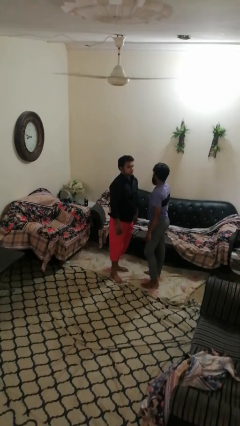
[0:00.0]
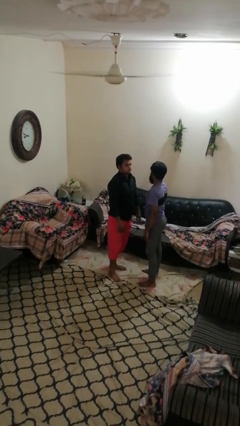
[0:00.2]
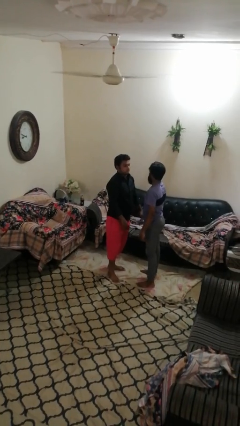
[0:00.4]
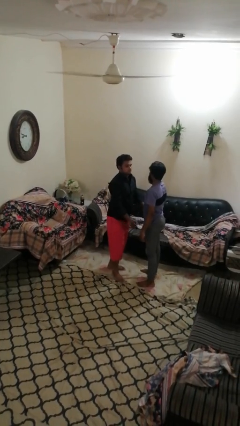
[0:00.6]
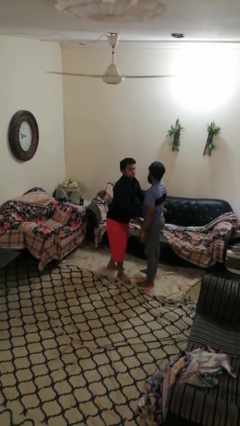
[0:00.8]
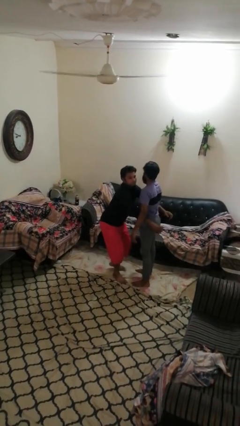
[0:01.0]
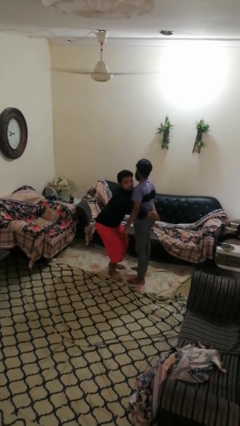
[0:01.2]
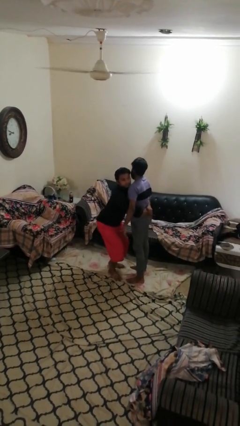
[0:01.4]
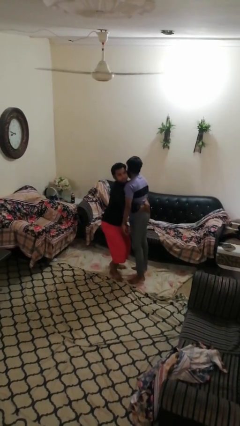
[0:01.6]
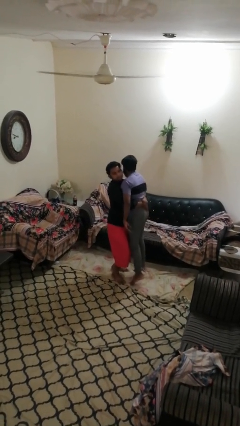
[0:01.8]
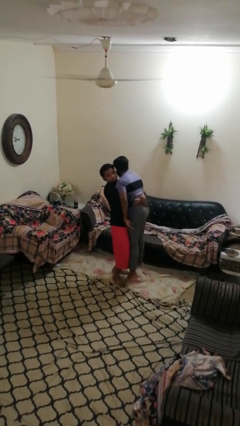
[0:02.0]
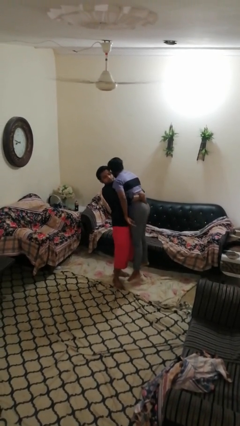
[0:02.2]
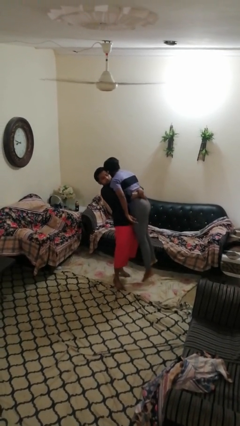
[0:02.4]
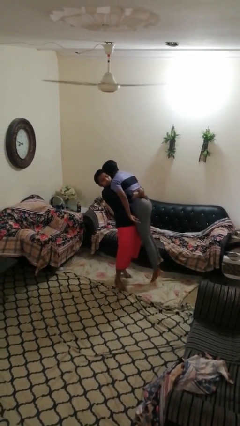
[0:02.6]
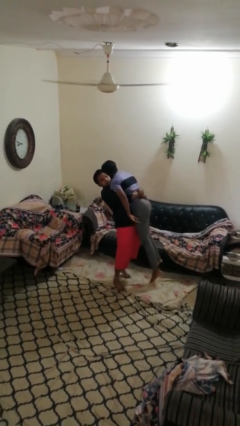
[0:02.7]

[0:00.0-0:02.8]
person picks up person

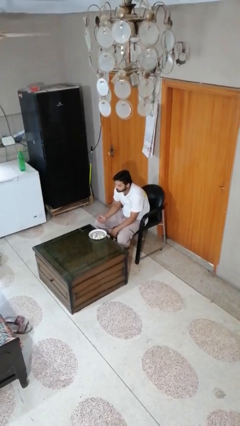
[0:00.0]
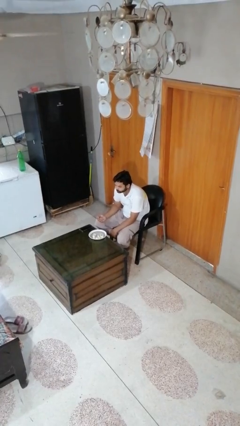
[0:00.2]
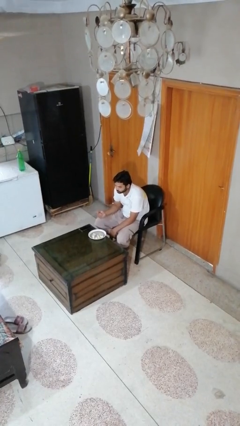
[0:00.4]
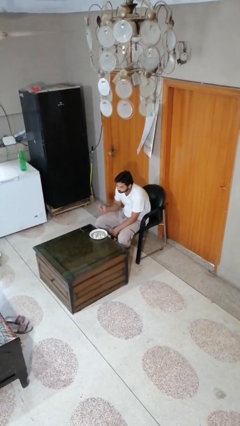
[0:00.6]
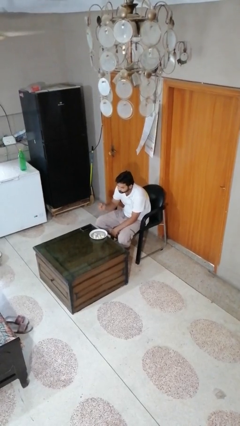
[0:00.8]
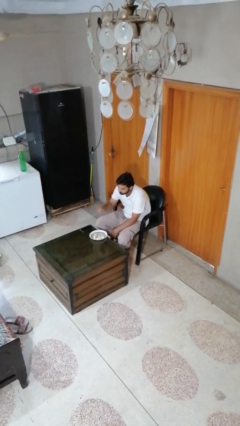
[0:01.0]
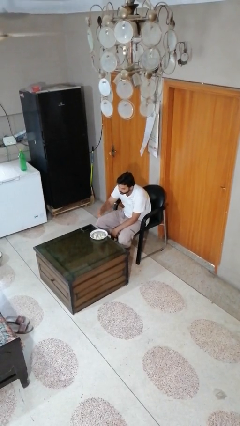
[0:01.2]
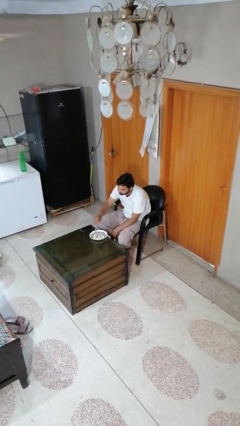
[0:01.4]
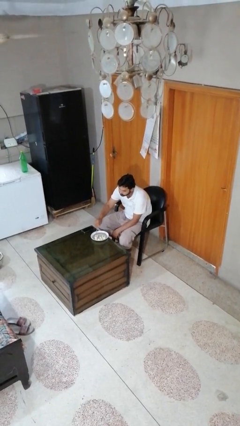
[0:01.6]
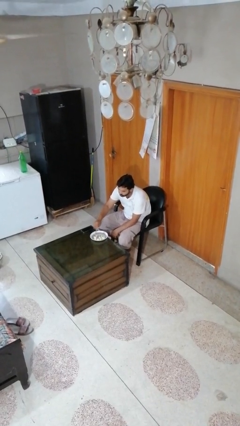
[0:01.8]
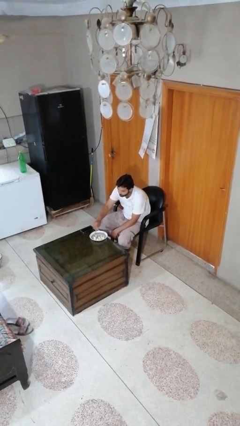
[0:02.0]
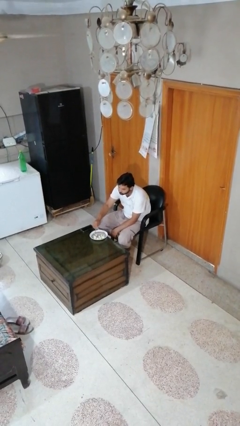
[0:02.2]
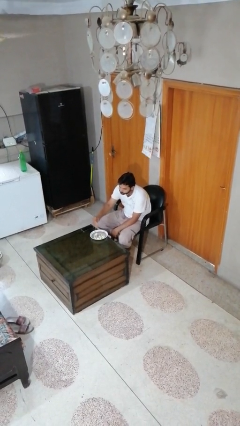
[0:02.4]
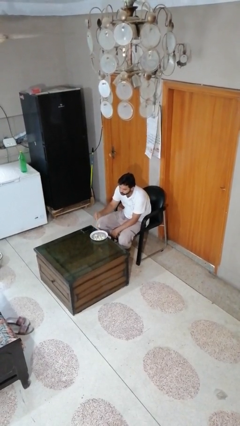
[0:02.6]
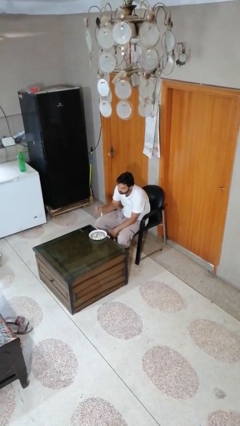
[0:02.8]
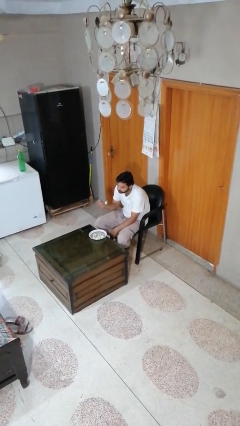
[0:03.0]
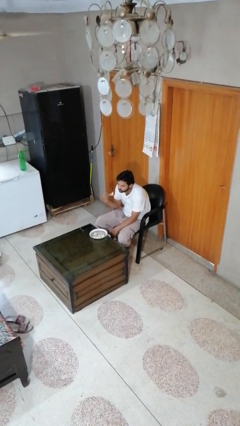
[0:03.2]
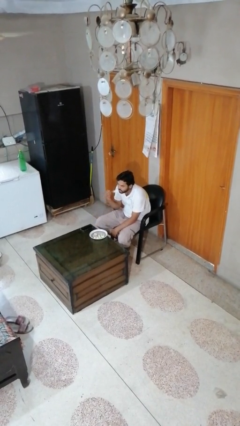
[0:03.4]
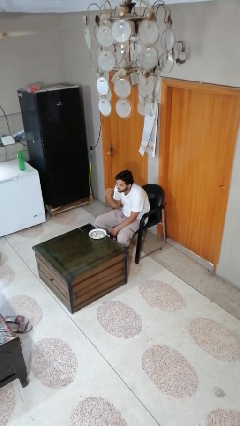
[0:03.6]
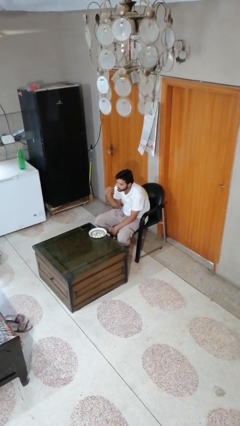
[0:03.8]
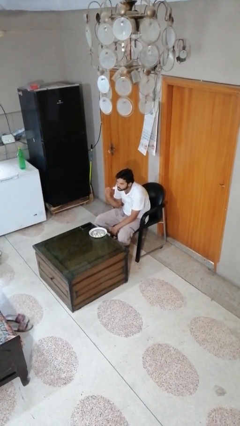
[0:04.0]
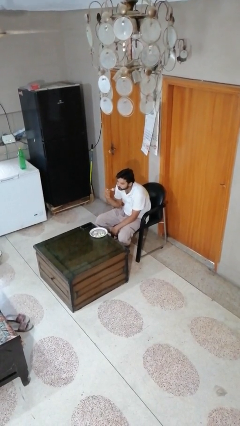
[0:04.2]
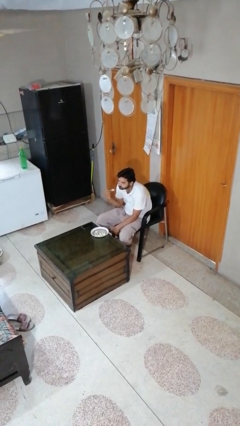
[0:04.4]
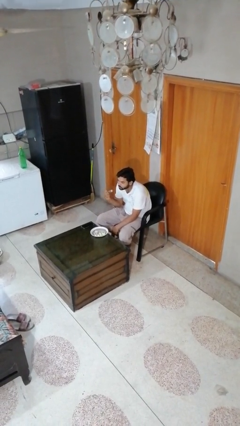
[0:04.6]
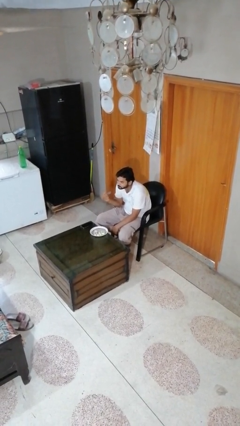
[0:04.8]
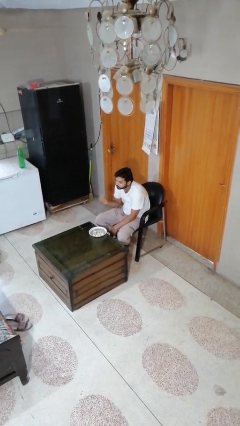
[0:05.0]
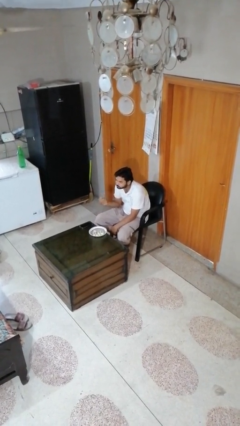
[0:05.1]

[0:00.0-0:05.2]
person eats with utensil

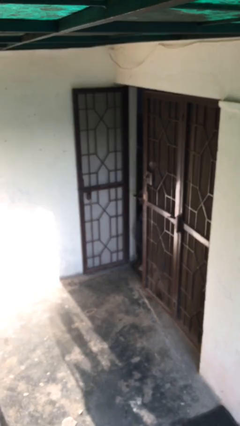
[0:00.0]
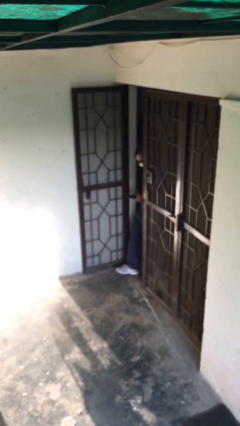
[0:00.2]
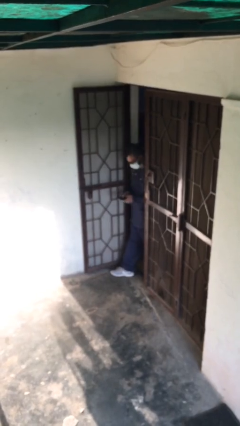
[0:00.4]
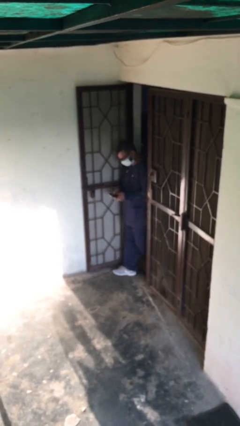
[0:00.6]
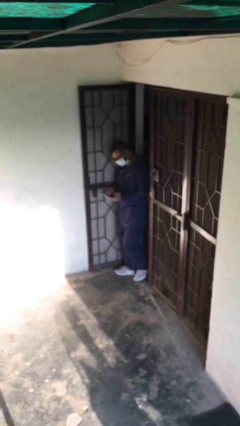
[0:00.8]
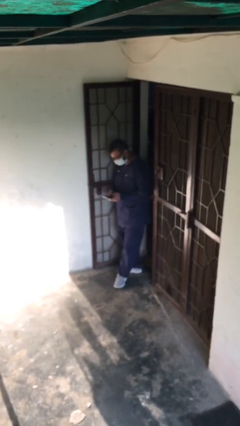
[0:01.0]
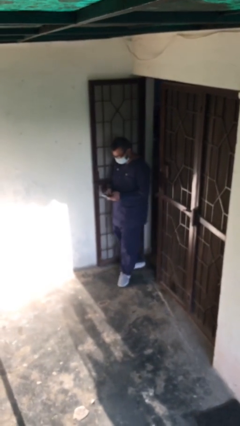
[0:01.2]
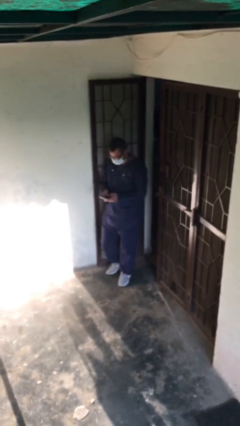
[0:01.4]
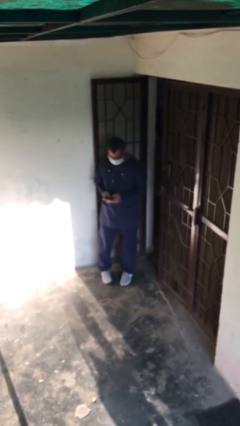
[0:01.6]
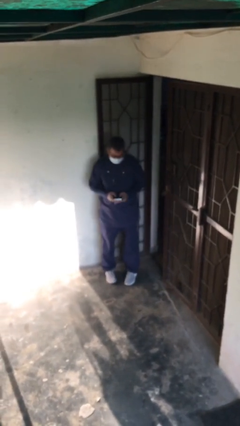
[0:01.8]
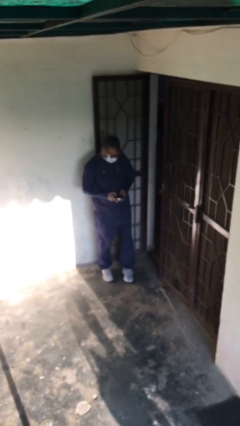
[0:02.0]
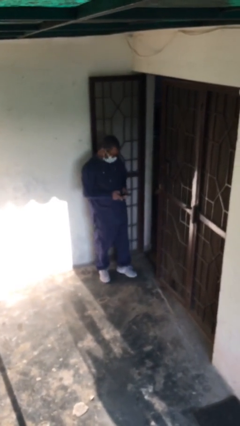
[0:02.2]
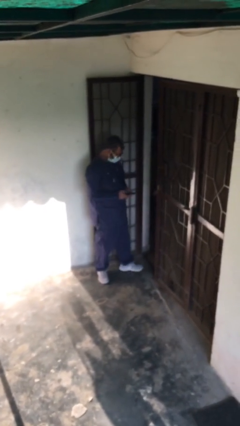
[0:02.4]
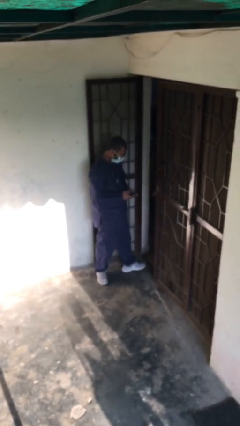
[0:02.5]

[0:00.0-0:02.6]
person enters scene through structure

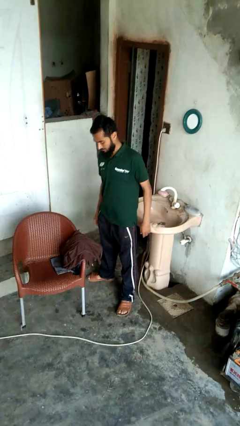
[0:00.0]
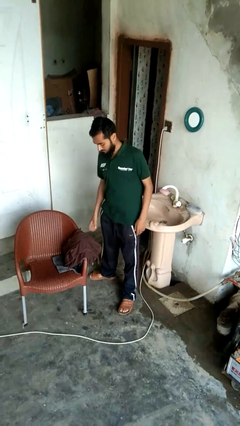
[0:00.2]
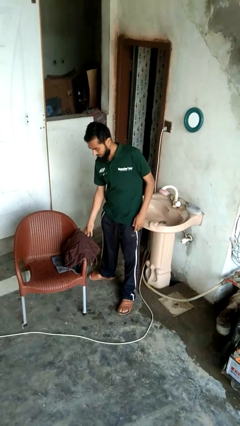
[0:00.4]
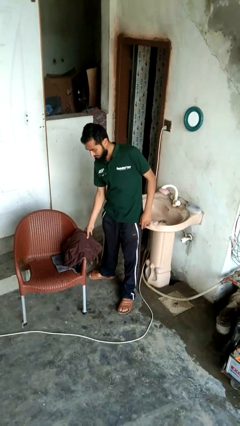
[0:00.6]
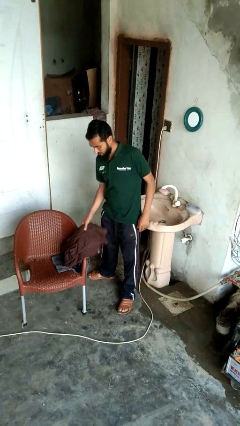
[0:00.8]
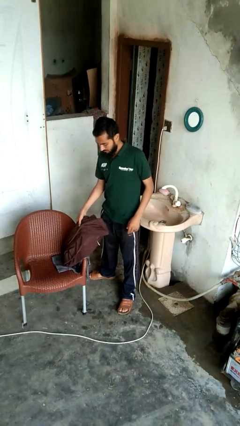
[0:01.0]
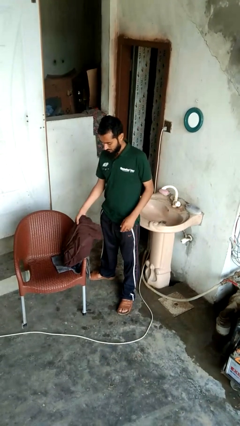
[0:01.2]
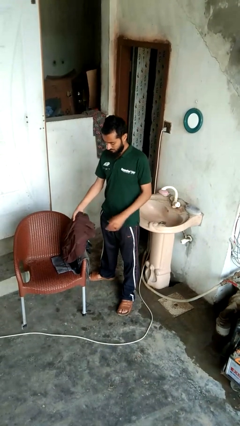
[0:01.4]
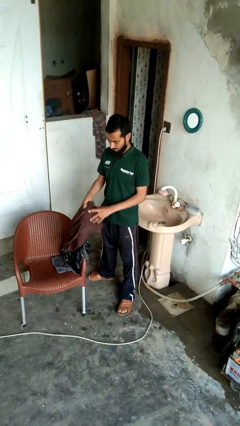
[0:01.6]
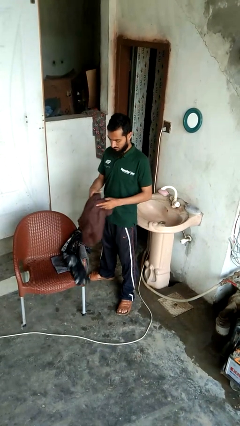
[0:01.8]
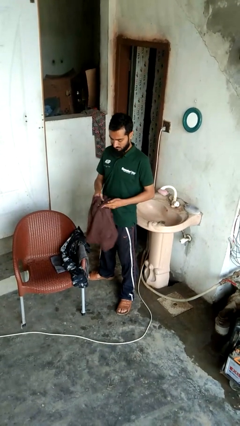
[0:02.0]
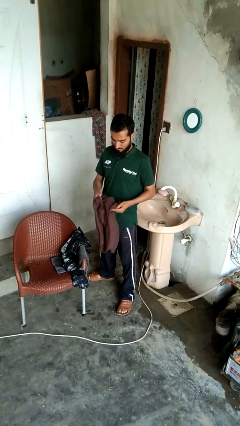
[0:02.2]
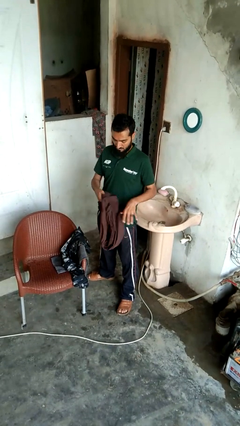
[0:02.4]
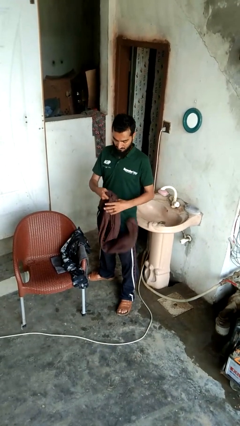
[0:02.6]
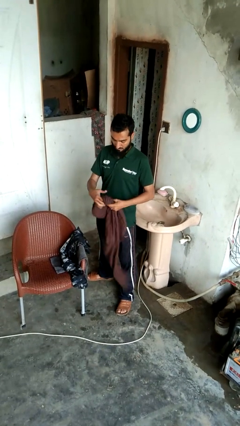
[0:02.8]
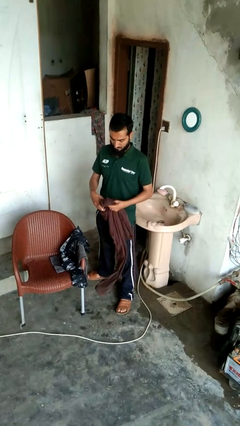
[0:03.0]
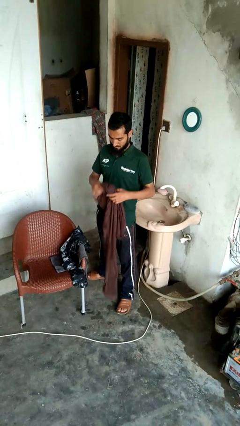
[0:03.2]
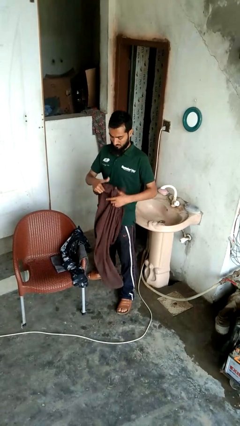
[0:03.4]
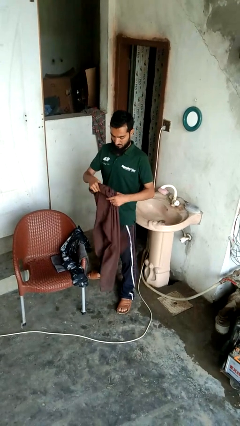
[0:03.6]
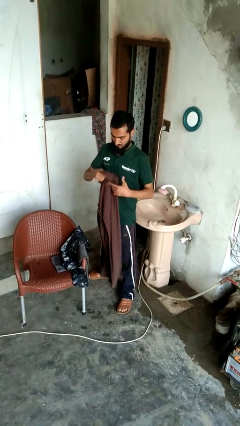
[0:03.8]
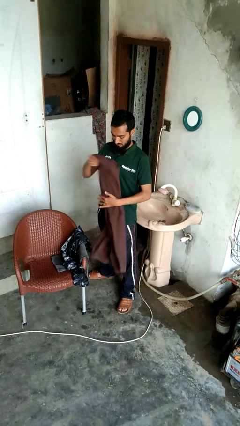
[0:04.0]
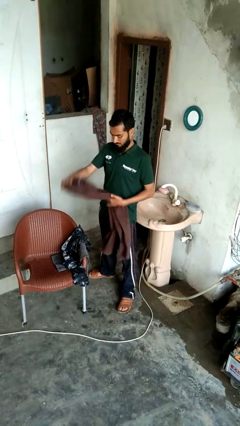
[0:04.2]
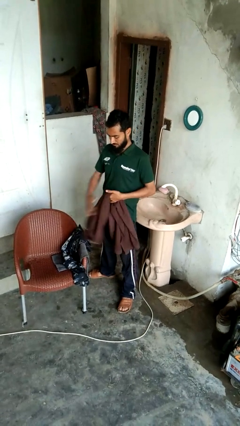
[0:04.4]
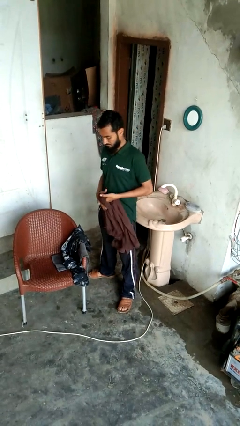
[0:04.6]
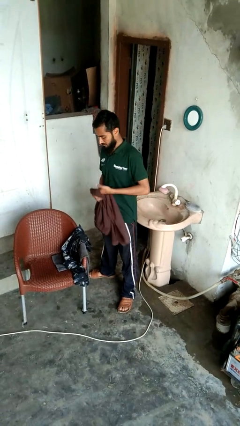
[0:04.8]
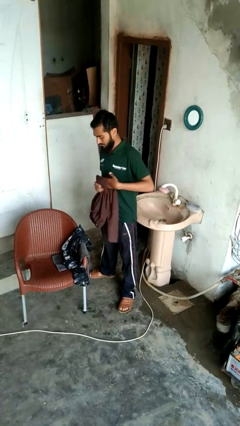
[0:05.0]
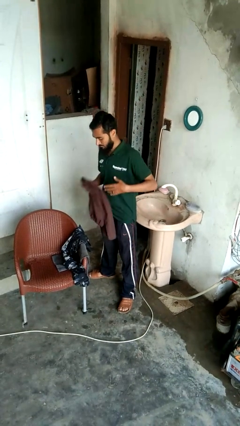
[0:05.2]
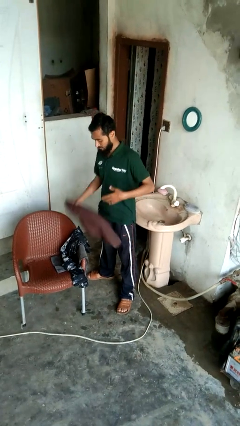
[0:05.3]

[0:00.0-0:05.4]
person folds pants

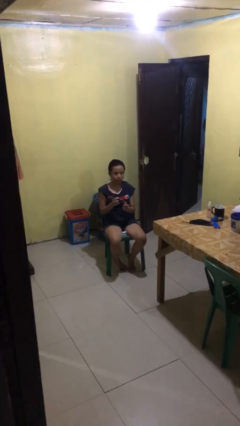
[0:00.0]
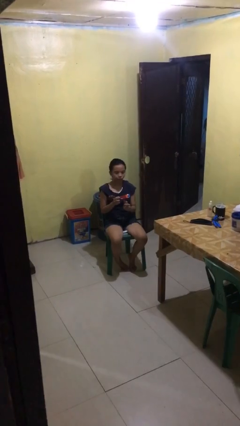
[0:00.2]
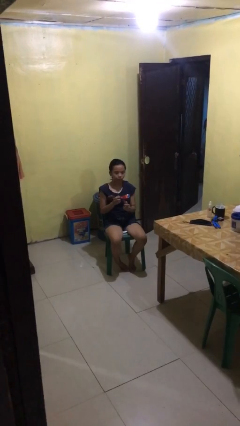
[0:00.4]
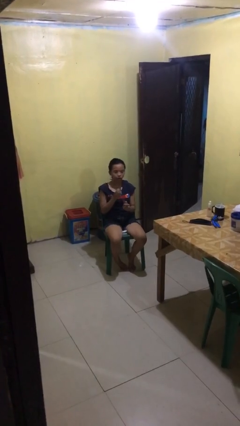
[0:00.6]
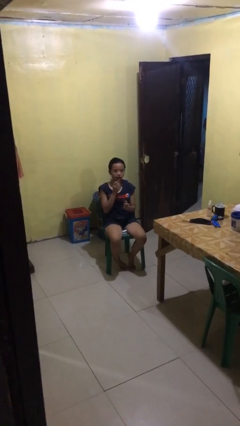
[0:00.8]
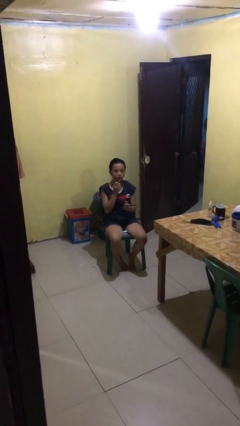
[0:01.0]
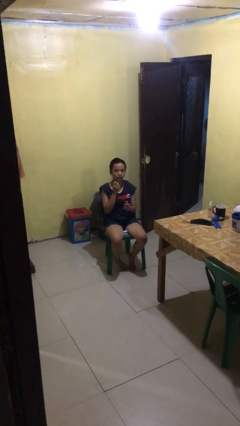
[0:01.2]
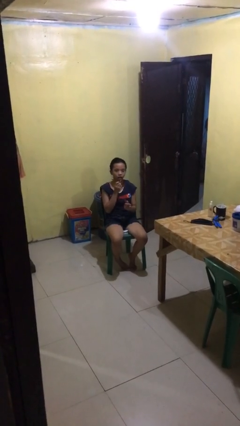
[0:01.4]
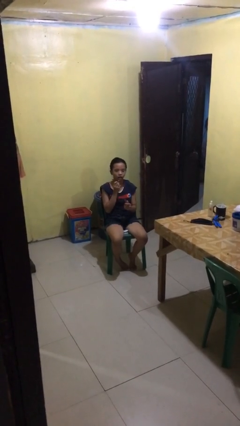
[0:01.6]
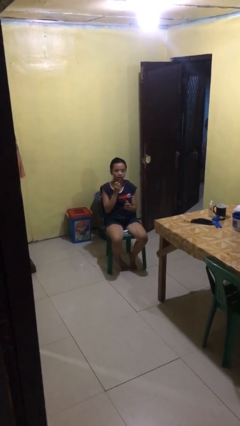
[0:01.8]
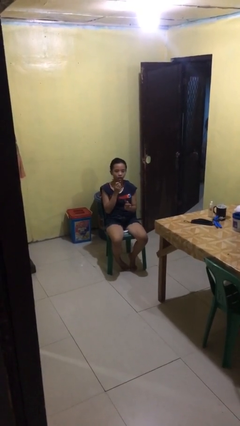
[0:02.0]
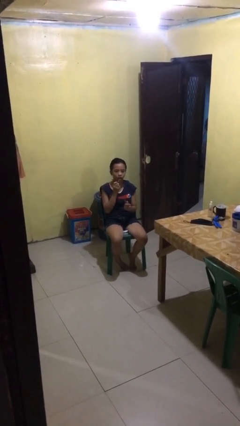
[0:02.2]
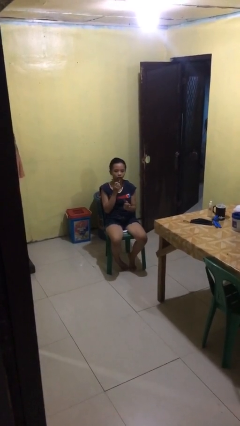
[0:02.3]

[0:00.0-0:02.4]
person applies lip makeup
